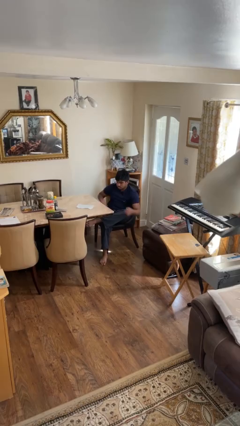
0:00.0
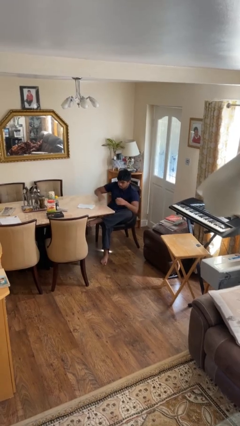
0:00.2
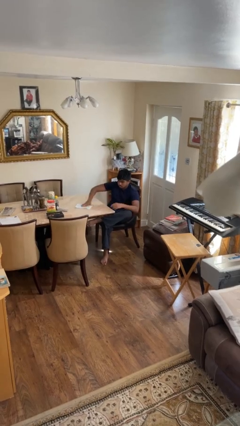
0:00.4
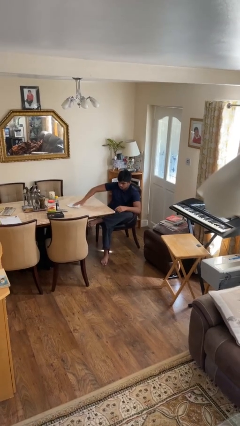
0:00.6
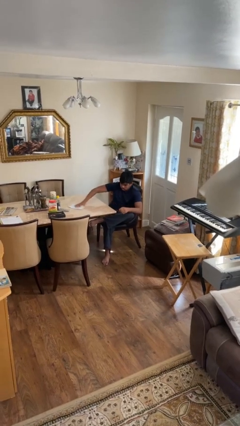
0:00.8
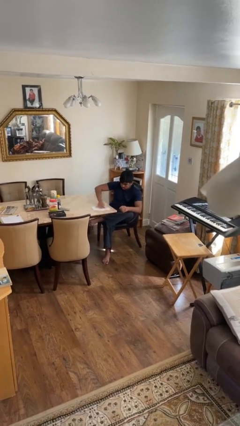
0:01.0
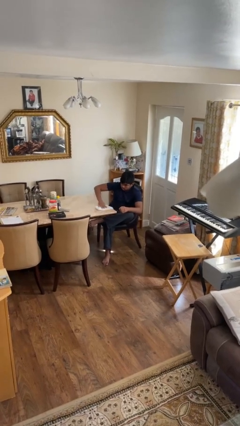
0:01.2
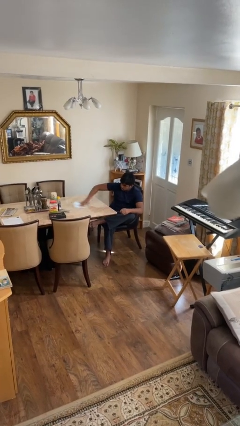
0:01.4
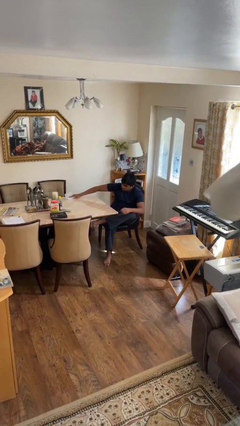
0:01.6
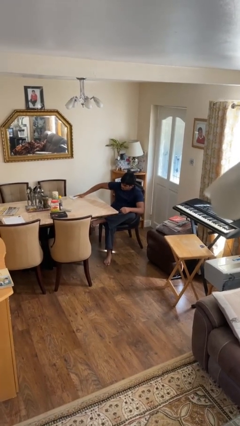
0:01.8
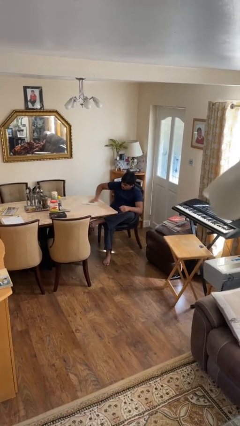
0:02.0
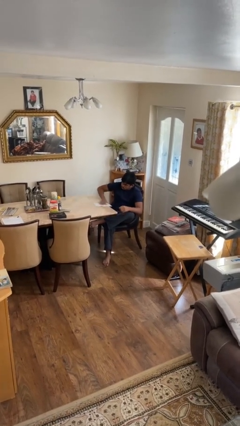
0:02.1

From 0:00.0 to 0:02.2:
person cleans table with rag

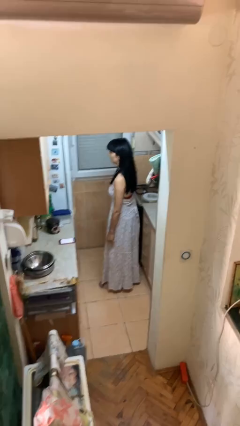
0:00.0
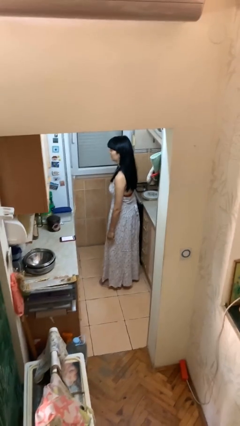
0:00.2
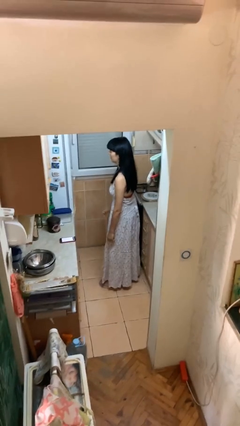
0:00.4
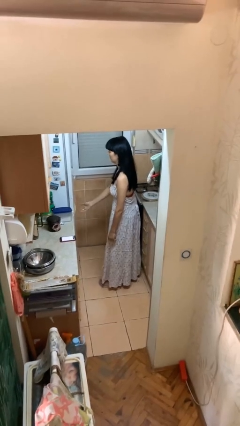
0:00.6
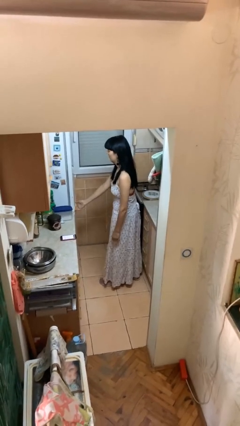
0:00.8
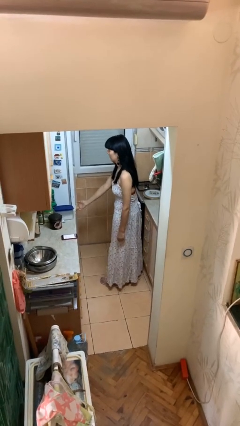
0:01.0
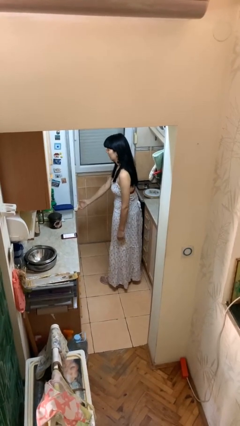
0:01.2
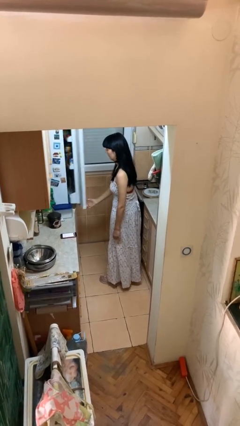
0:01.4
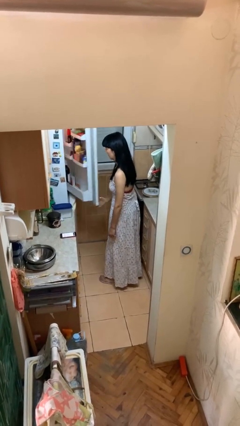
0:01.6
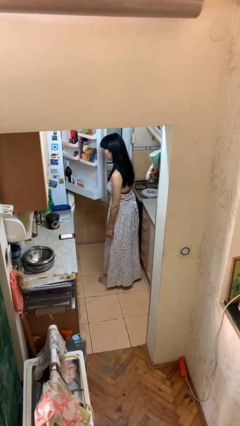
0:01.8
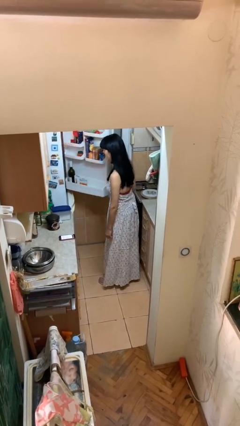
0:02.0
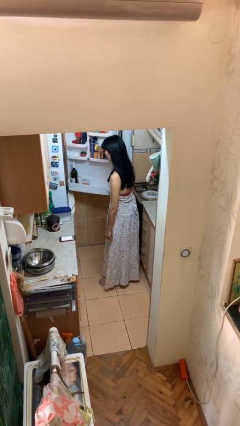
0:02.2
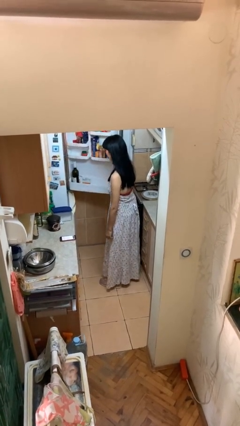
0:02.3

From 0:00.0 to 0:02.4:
person opens refrigerator

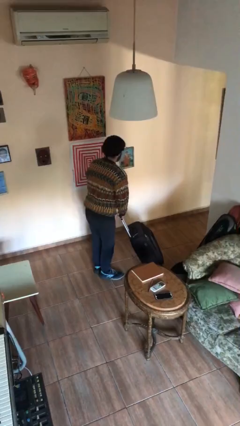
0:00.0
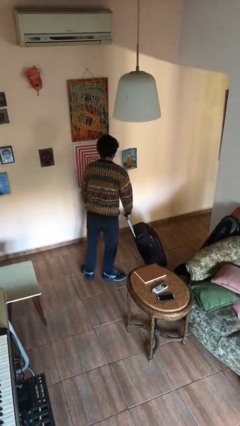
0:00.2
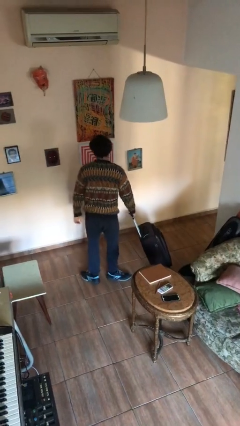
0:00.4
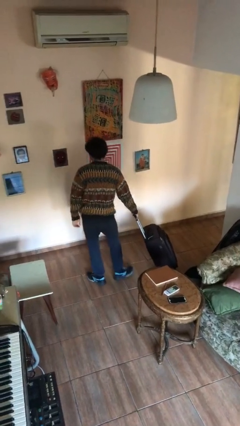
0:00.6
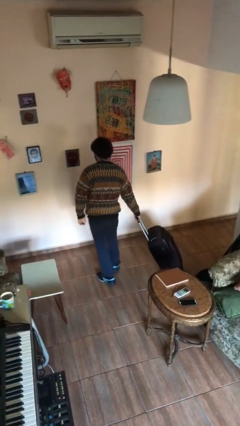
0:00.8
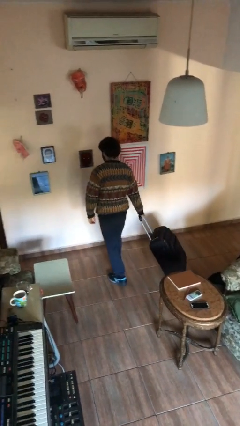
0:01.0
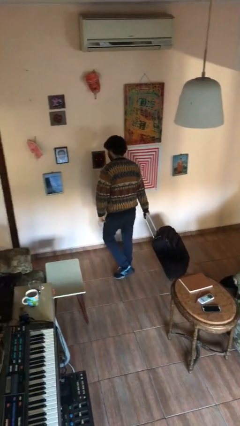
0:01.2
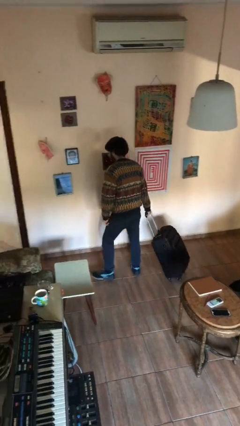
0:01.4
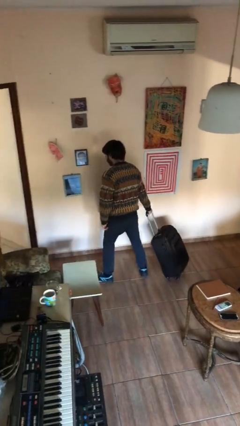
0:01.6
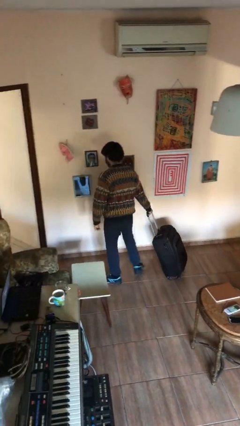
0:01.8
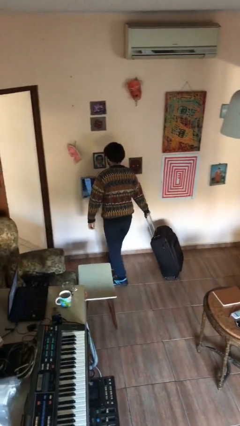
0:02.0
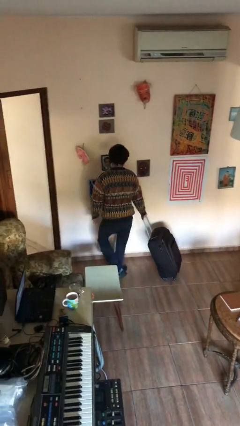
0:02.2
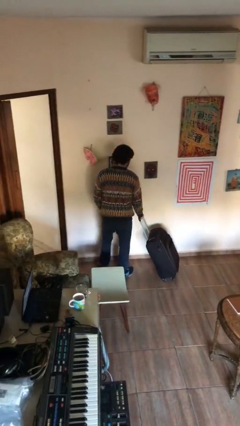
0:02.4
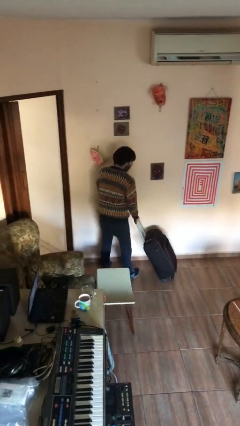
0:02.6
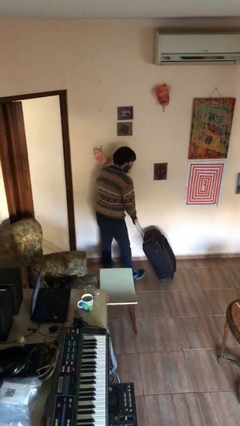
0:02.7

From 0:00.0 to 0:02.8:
person pulls wheeled cart

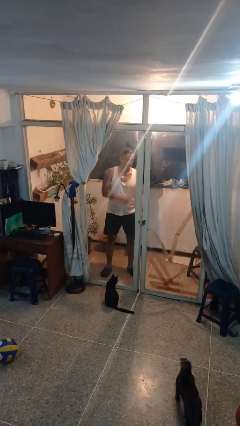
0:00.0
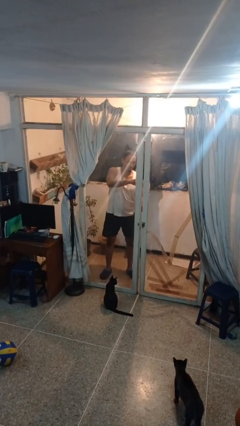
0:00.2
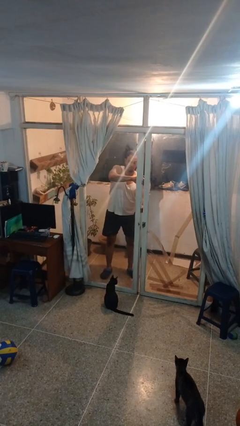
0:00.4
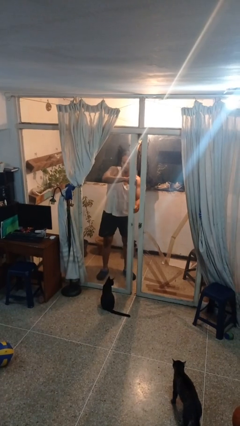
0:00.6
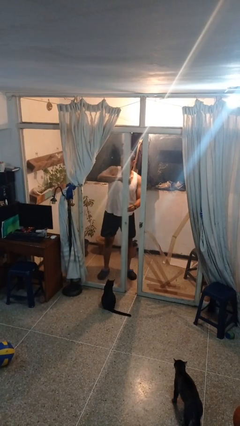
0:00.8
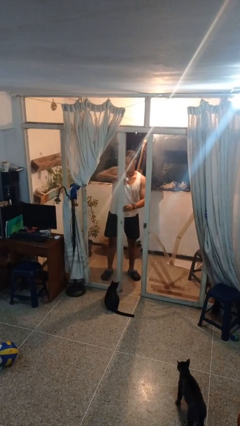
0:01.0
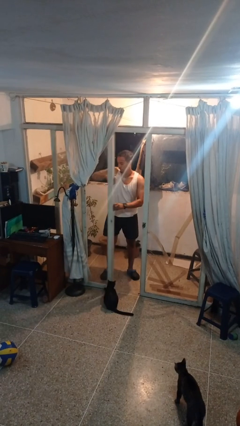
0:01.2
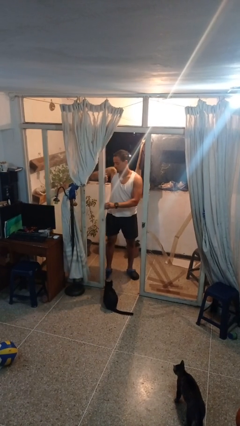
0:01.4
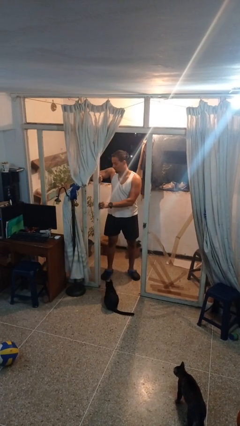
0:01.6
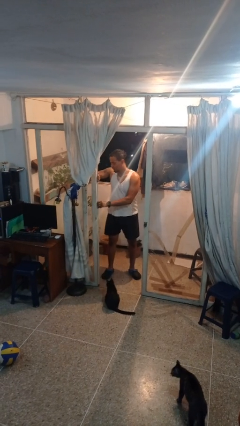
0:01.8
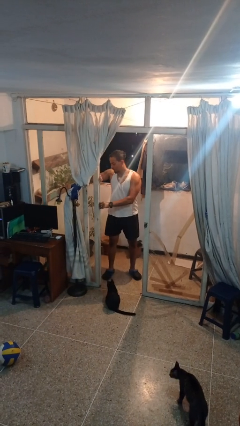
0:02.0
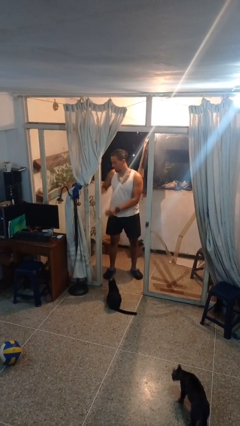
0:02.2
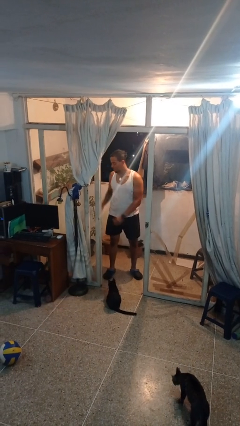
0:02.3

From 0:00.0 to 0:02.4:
person opens sliding door

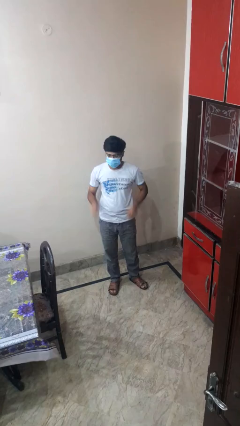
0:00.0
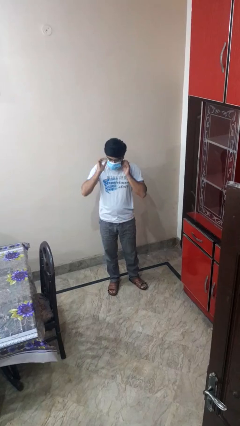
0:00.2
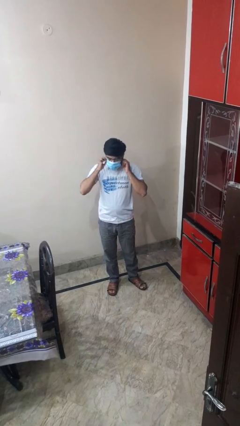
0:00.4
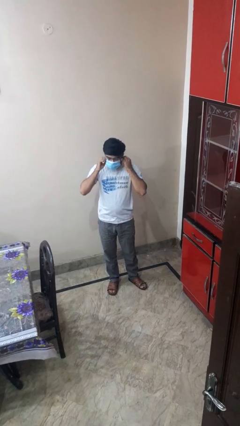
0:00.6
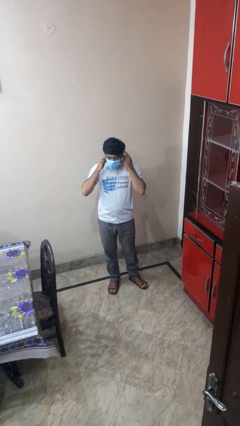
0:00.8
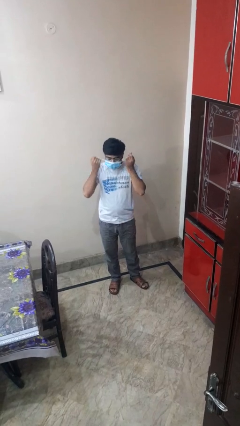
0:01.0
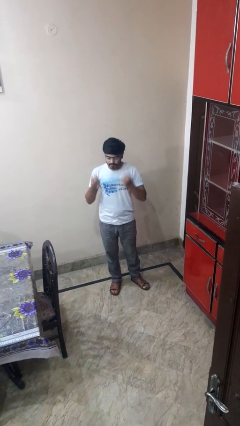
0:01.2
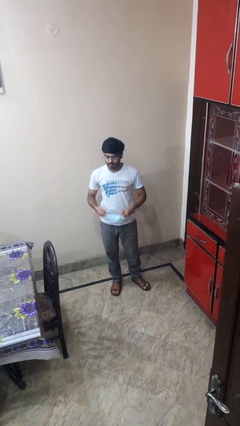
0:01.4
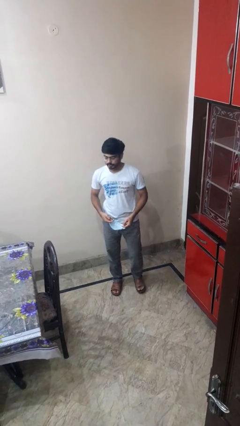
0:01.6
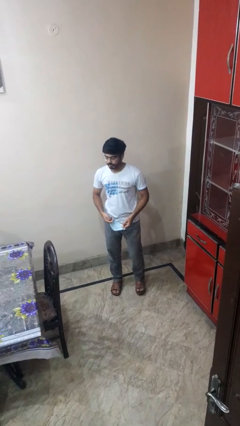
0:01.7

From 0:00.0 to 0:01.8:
person takes off facemask

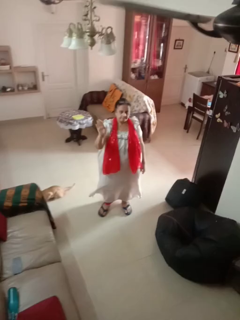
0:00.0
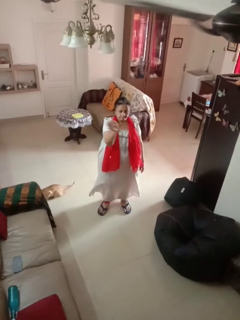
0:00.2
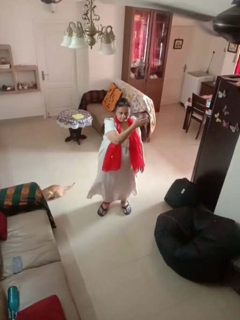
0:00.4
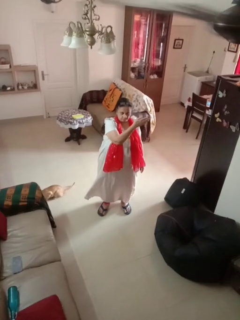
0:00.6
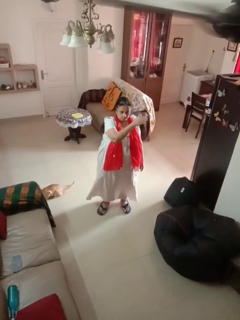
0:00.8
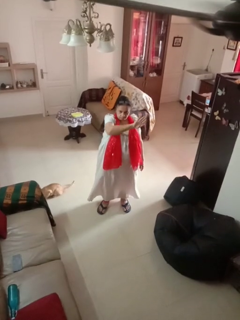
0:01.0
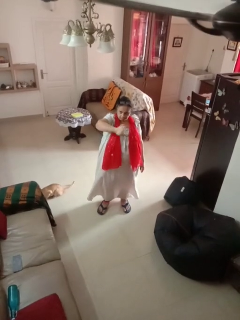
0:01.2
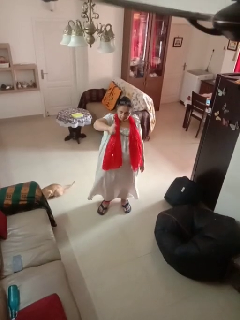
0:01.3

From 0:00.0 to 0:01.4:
person gestures swipe left

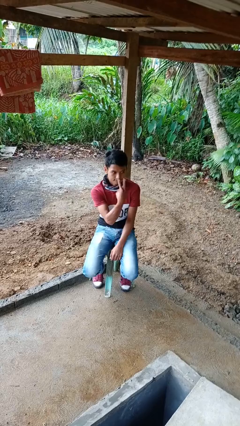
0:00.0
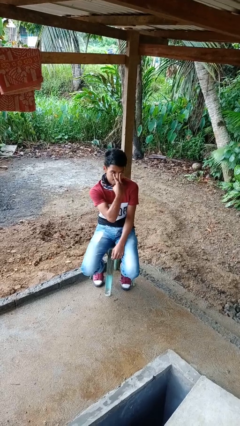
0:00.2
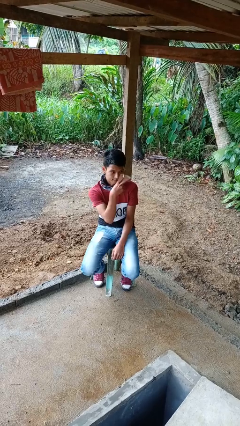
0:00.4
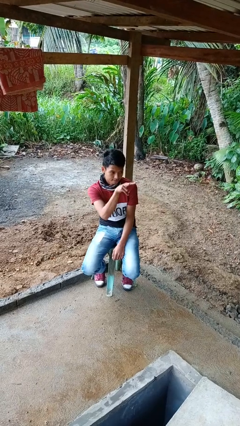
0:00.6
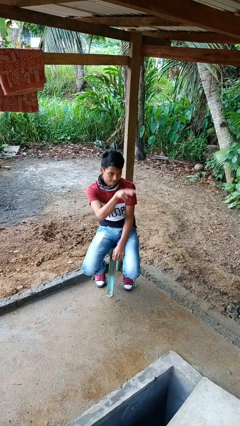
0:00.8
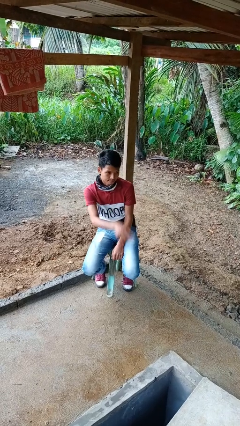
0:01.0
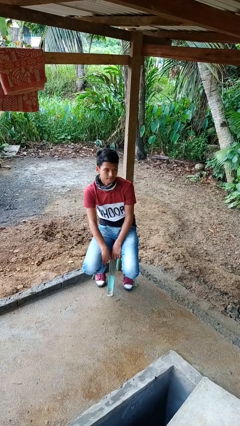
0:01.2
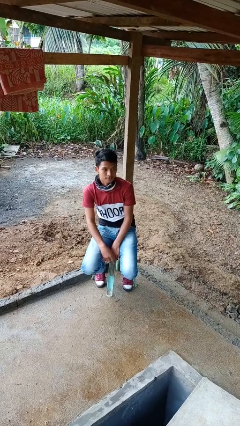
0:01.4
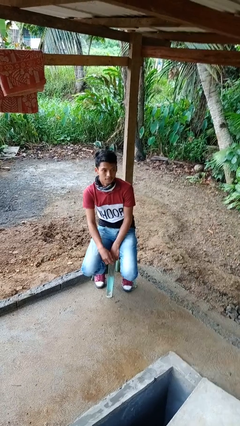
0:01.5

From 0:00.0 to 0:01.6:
person gestures watch closely

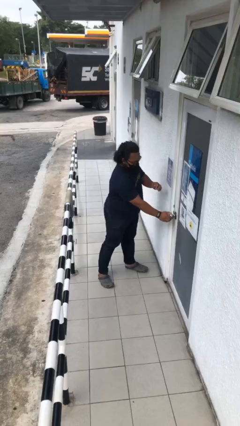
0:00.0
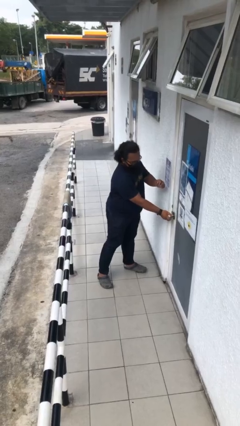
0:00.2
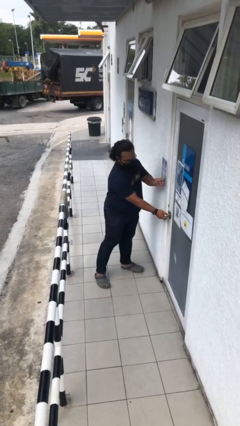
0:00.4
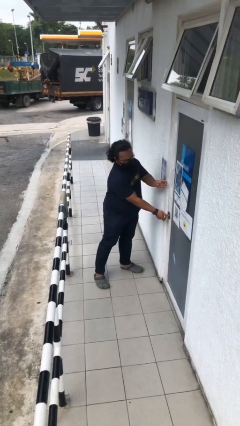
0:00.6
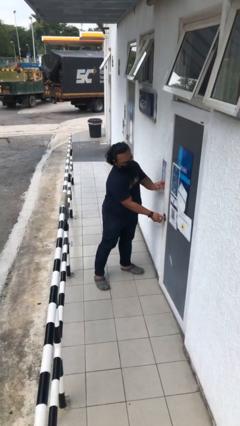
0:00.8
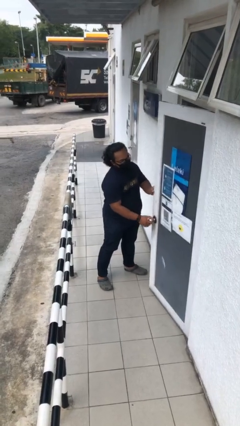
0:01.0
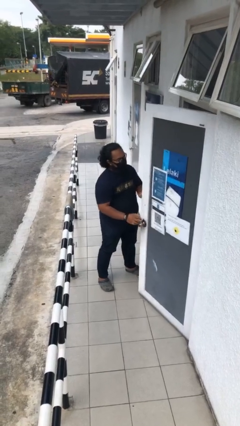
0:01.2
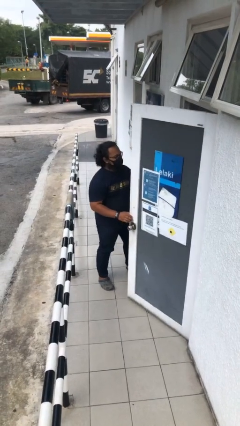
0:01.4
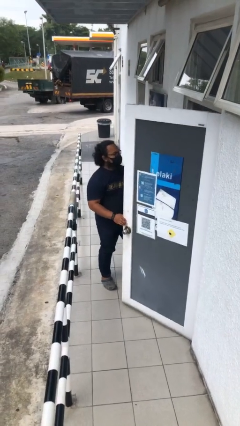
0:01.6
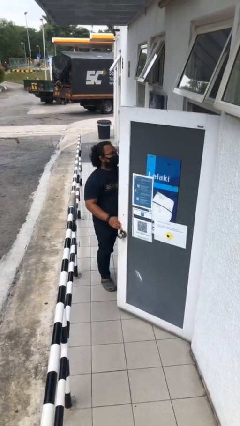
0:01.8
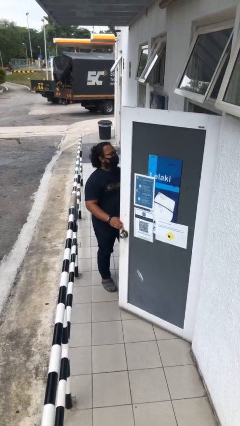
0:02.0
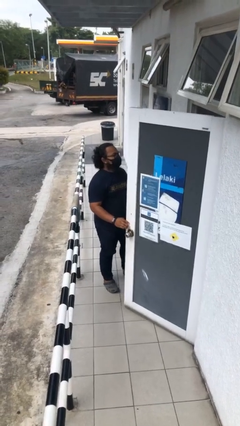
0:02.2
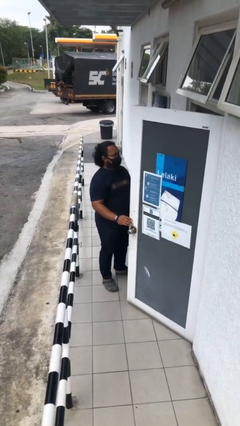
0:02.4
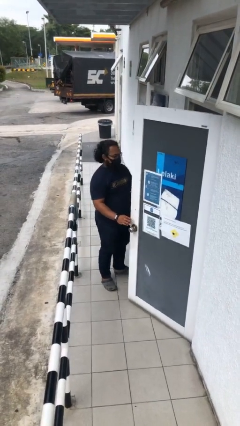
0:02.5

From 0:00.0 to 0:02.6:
person opens facility door
